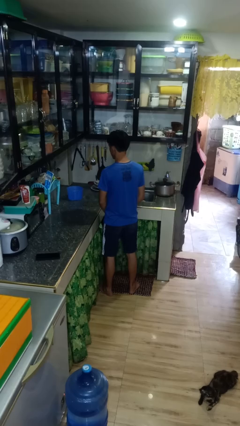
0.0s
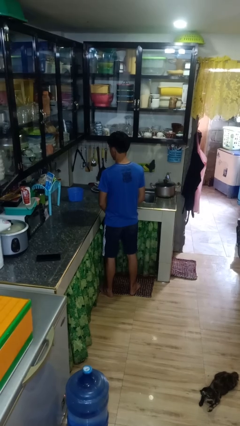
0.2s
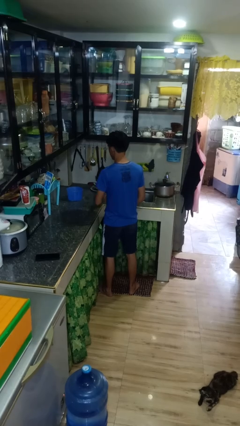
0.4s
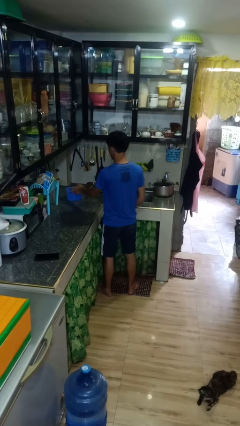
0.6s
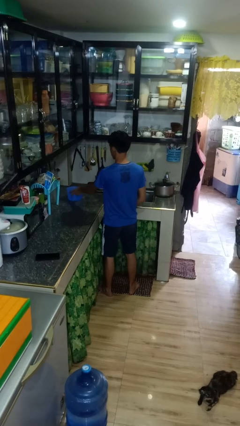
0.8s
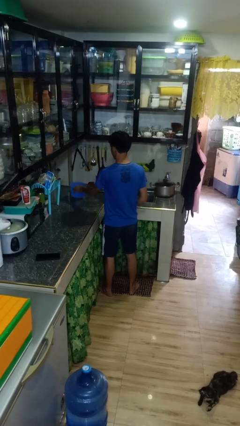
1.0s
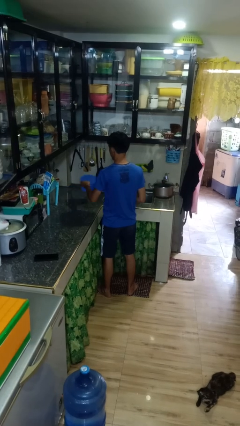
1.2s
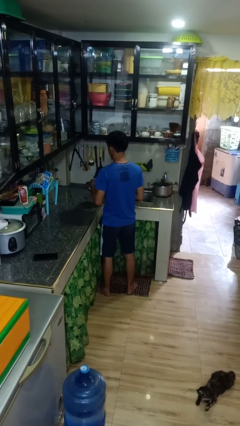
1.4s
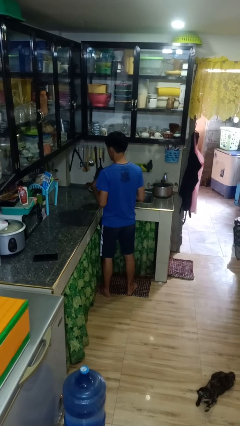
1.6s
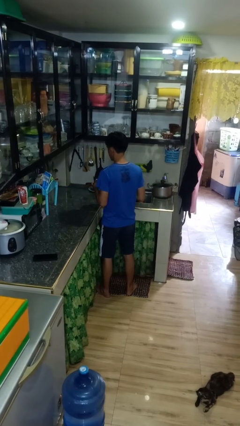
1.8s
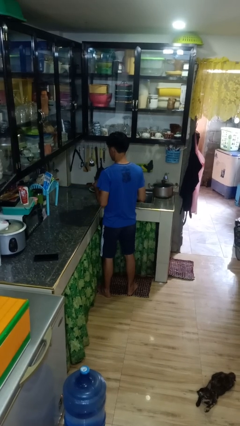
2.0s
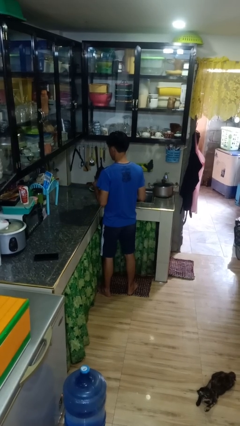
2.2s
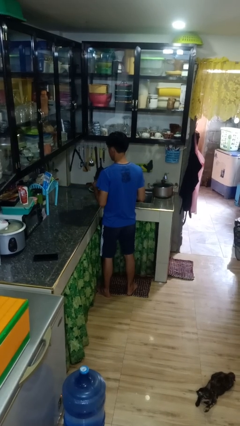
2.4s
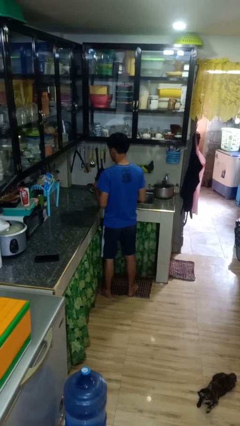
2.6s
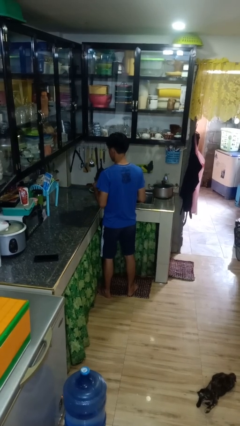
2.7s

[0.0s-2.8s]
person picks up object from countertop

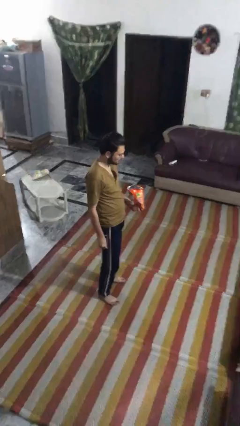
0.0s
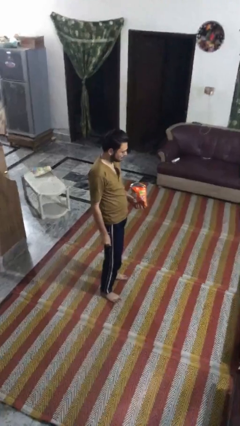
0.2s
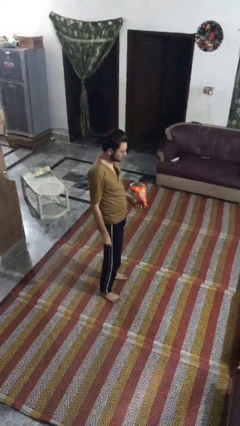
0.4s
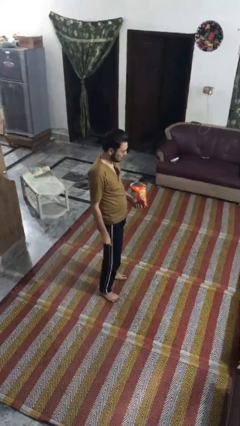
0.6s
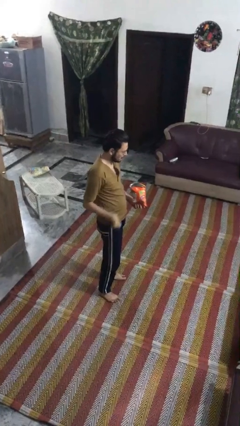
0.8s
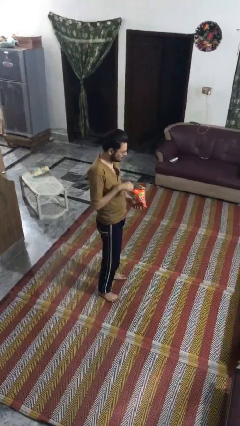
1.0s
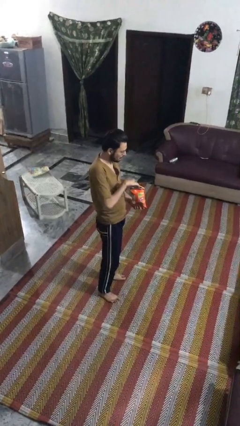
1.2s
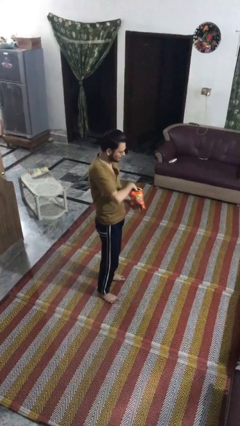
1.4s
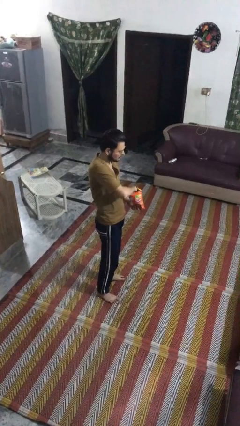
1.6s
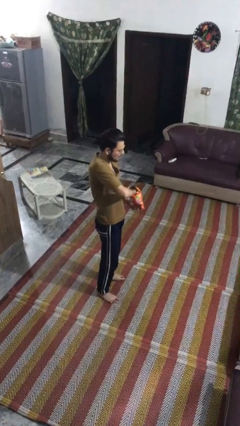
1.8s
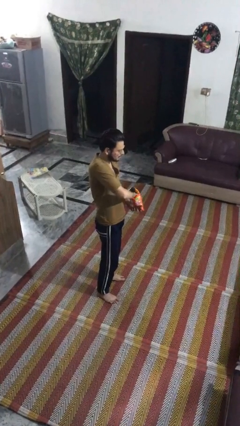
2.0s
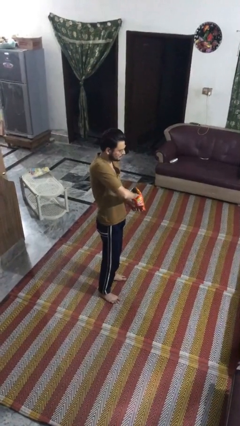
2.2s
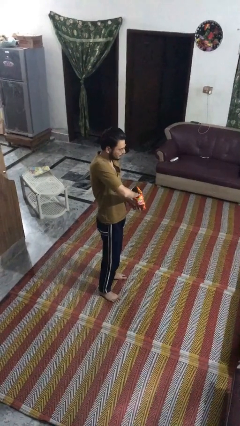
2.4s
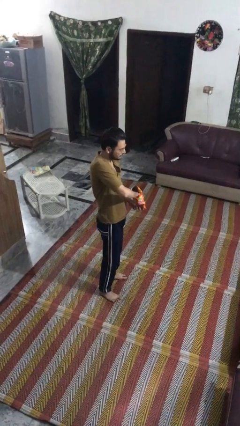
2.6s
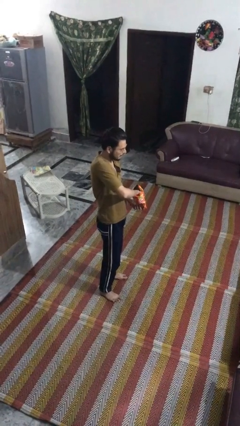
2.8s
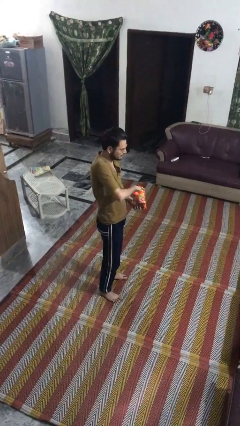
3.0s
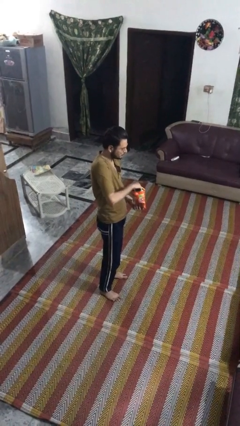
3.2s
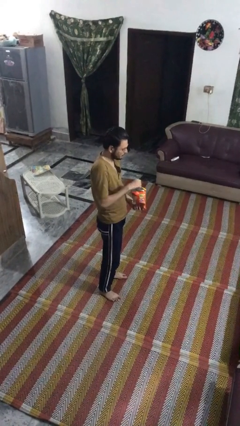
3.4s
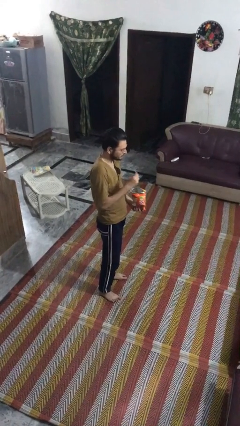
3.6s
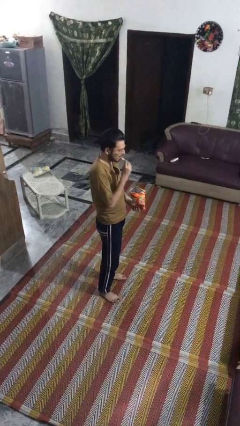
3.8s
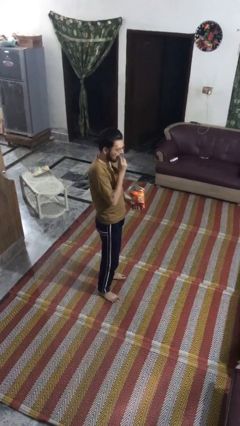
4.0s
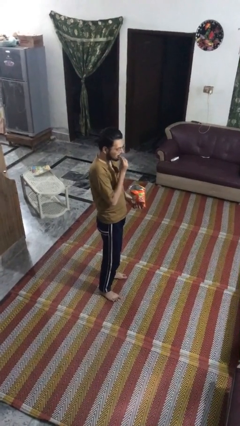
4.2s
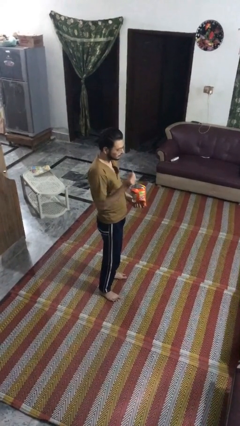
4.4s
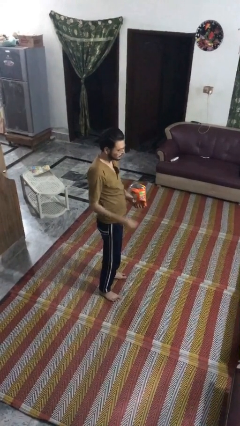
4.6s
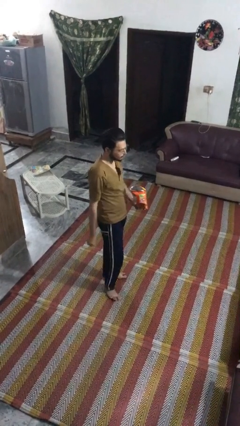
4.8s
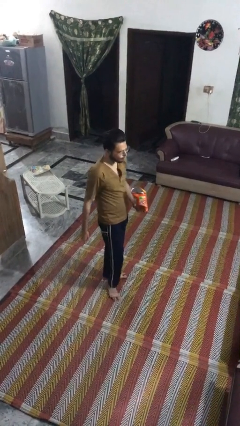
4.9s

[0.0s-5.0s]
person eats snack from bag

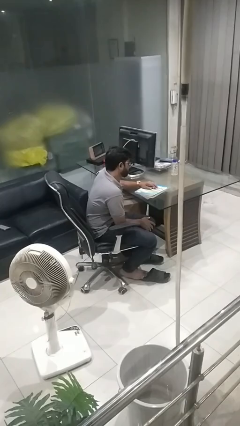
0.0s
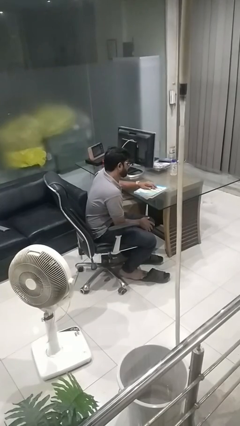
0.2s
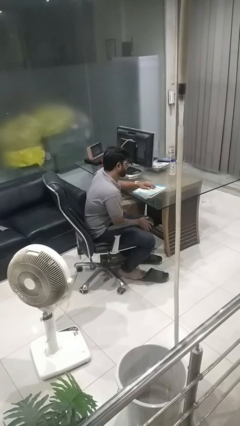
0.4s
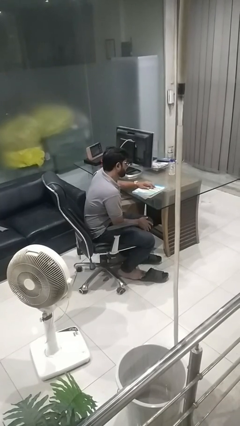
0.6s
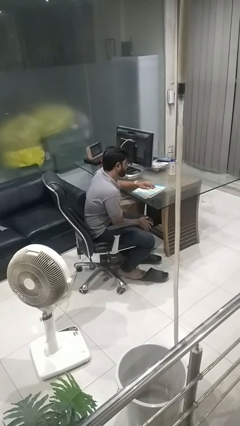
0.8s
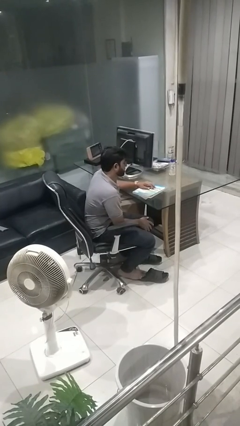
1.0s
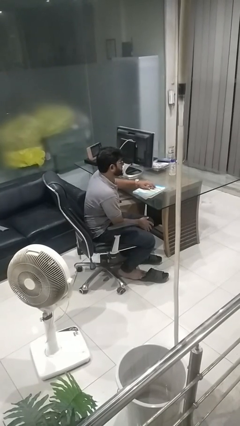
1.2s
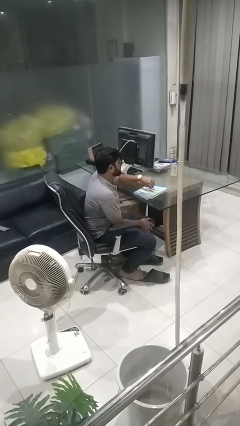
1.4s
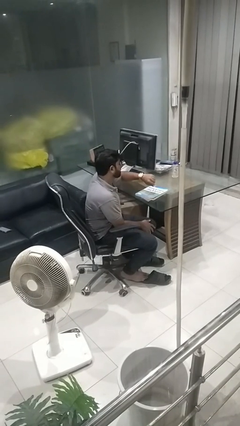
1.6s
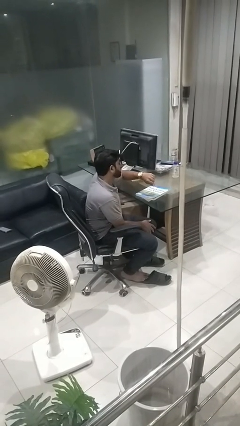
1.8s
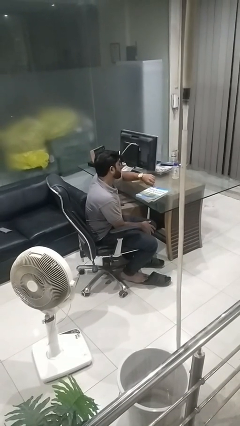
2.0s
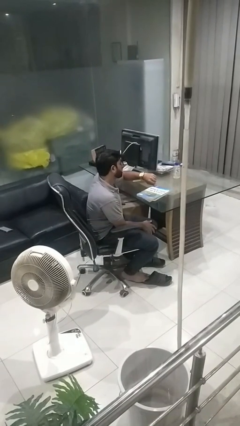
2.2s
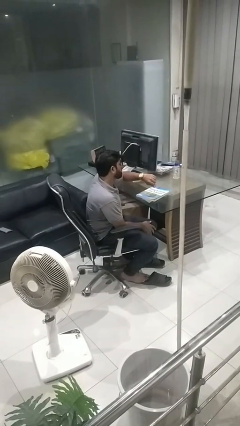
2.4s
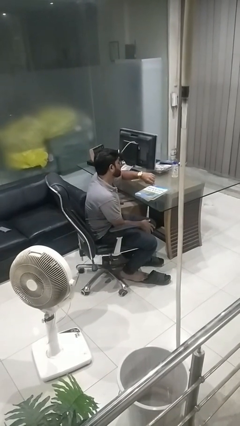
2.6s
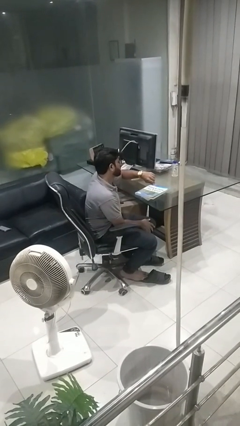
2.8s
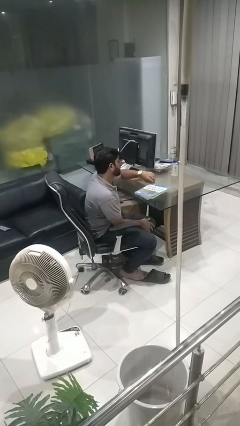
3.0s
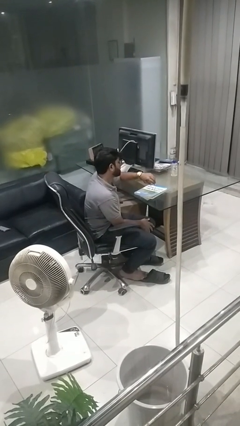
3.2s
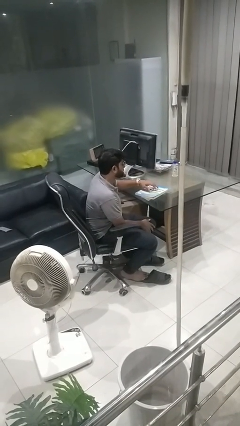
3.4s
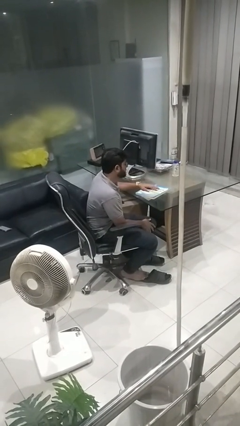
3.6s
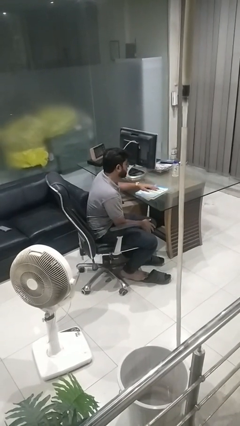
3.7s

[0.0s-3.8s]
person looks at wristwatch

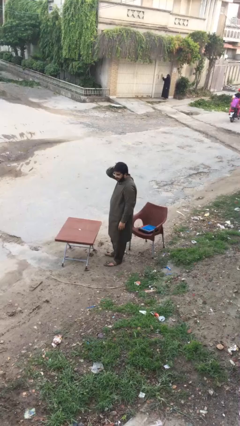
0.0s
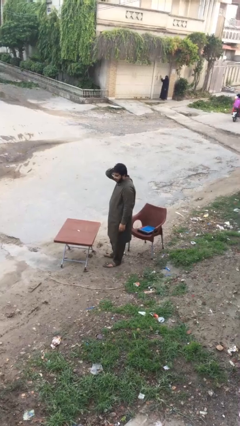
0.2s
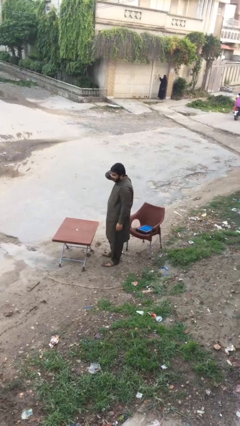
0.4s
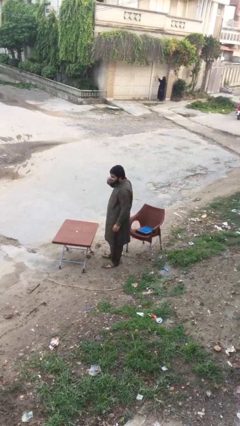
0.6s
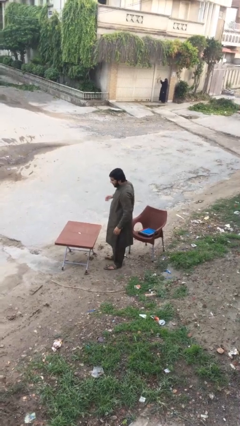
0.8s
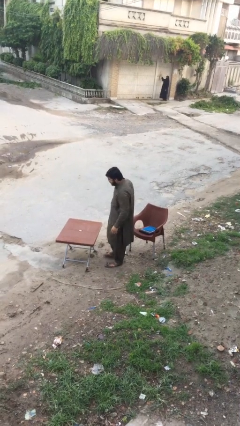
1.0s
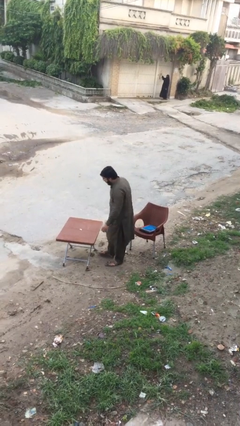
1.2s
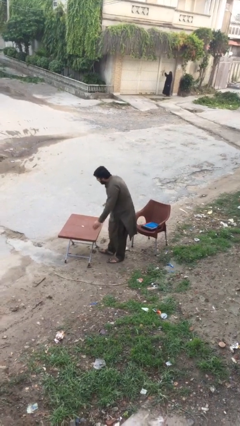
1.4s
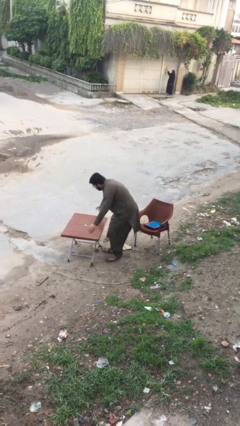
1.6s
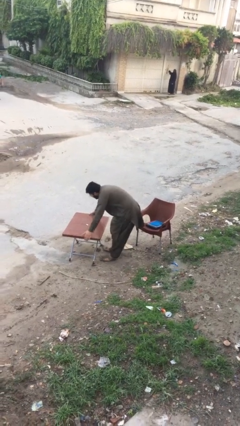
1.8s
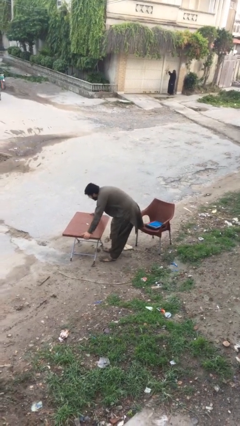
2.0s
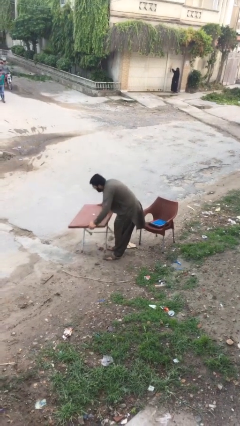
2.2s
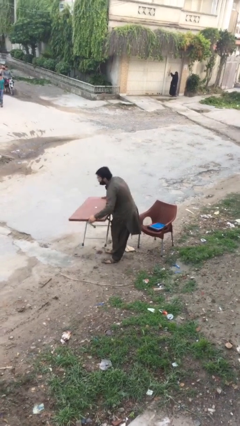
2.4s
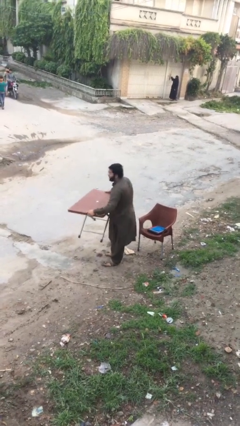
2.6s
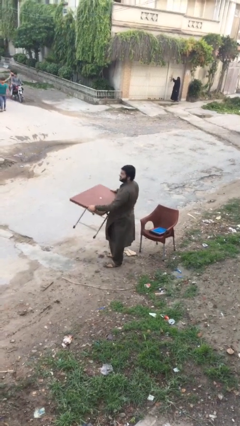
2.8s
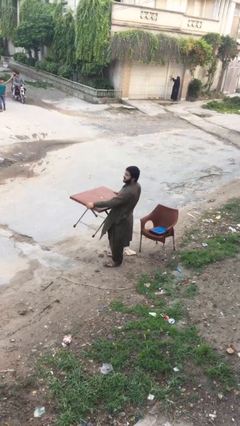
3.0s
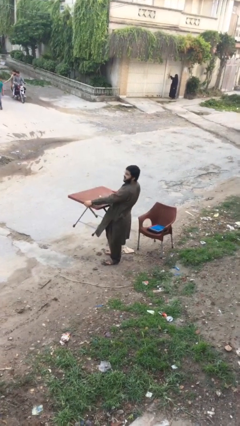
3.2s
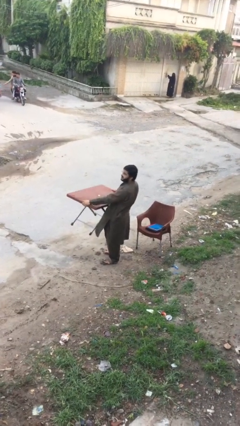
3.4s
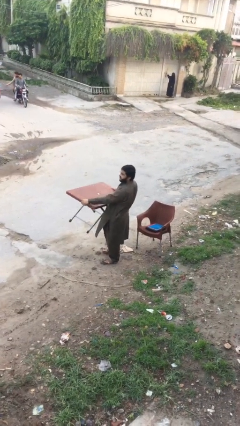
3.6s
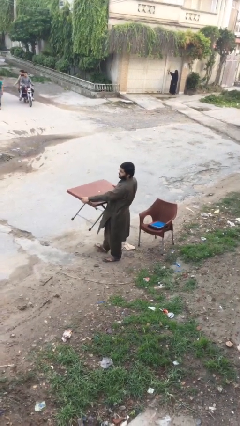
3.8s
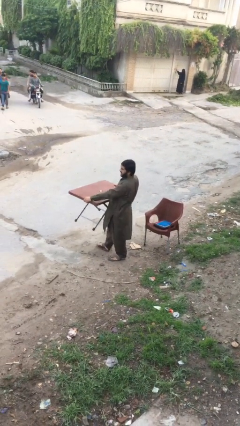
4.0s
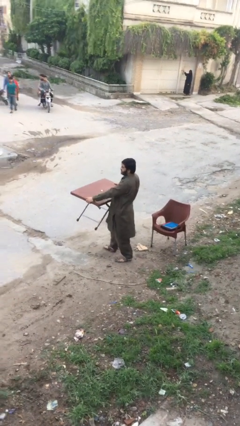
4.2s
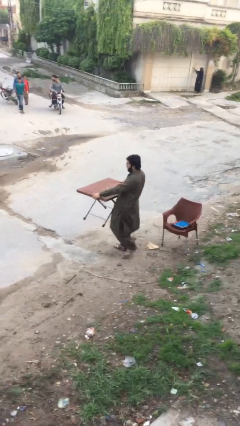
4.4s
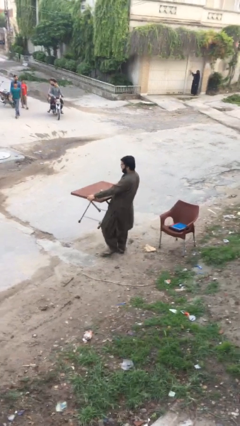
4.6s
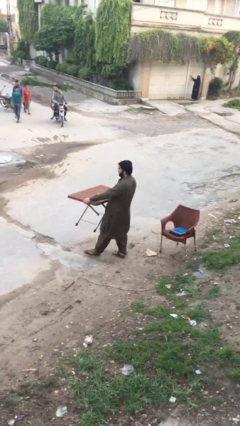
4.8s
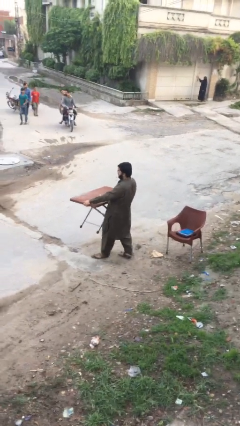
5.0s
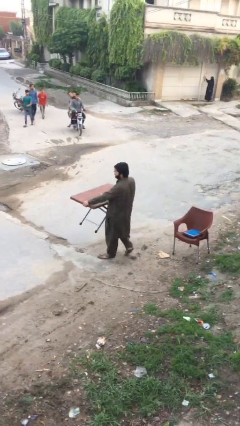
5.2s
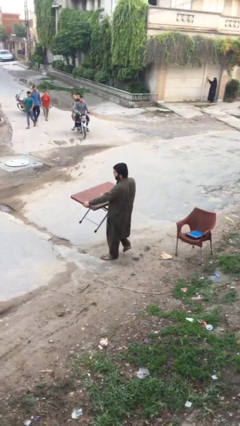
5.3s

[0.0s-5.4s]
person carries heavy object

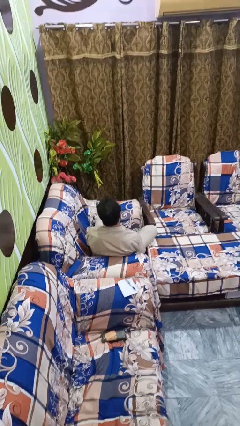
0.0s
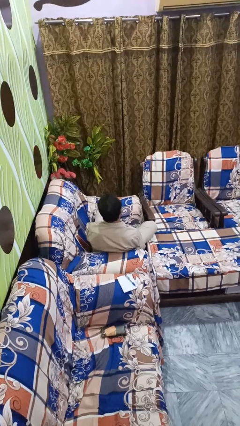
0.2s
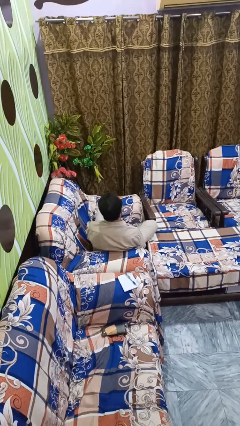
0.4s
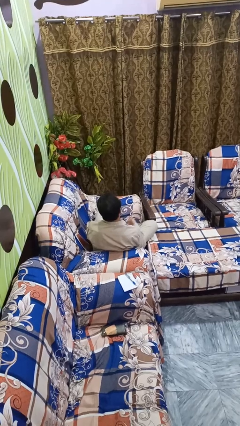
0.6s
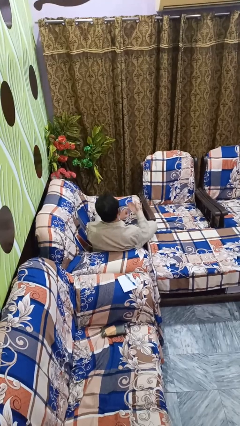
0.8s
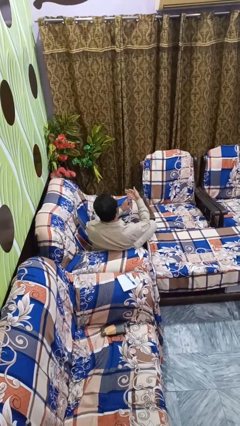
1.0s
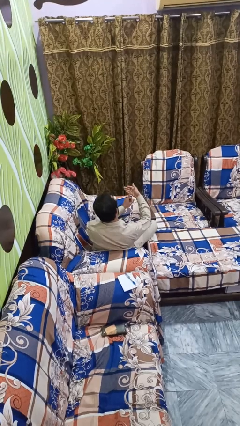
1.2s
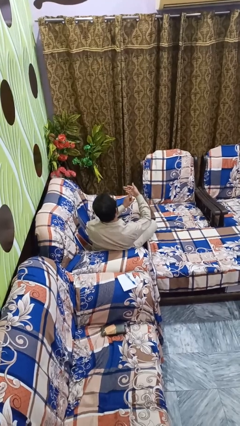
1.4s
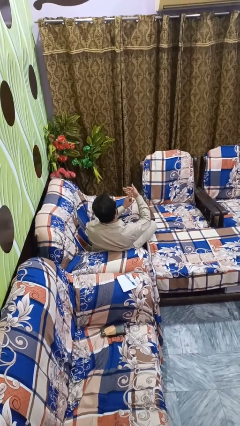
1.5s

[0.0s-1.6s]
person gestures number one
